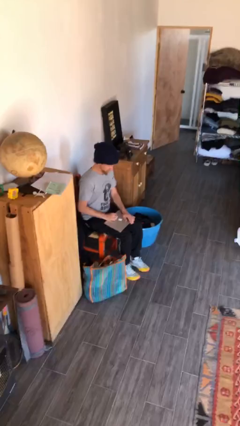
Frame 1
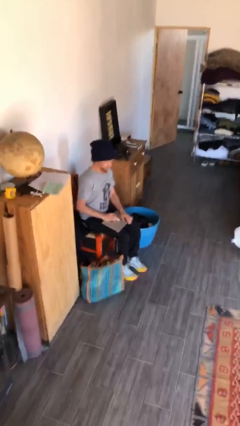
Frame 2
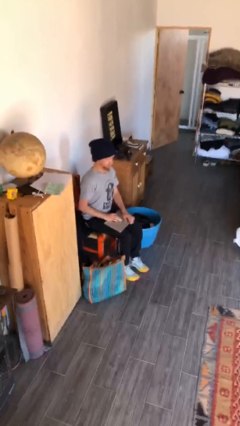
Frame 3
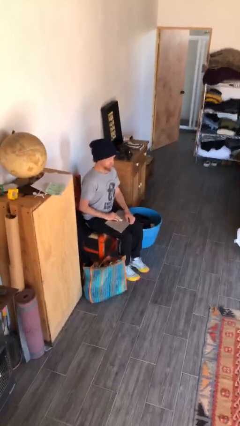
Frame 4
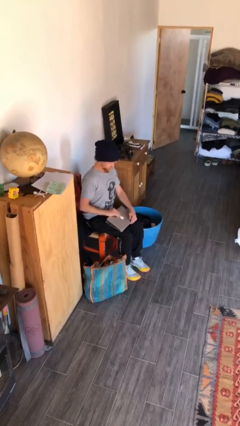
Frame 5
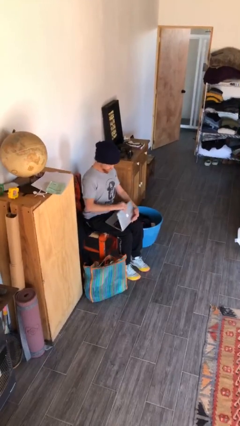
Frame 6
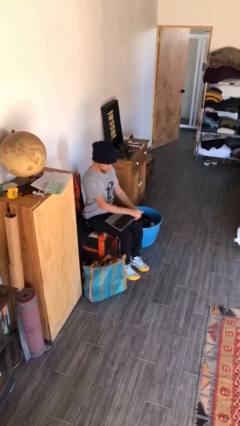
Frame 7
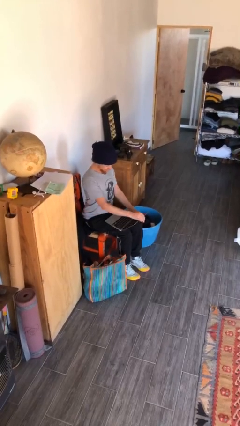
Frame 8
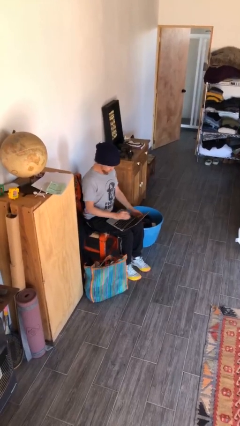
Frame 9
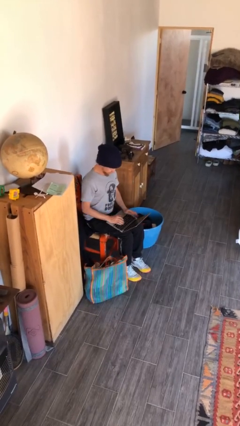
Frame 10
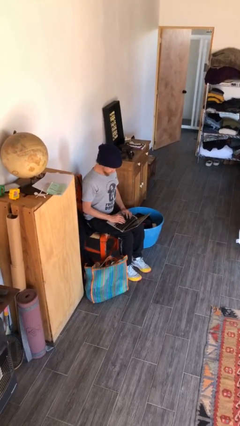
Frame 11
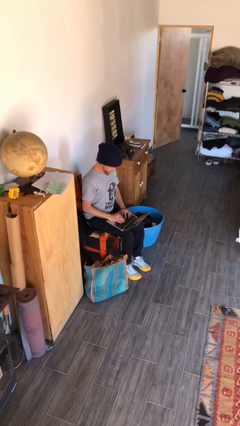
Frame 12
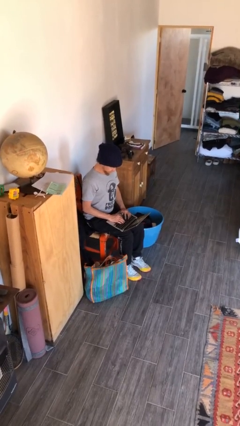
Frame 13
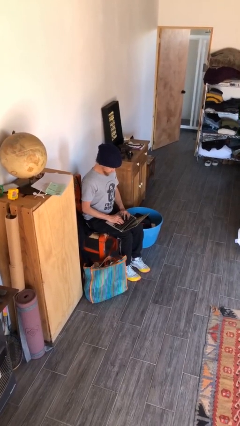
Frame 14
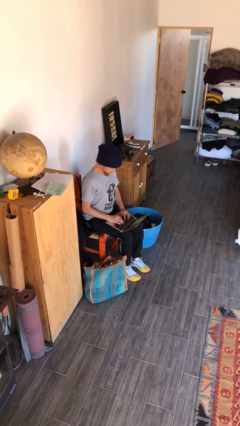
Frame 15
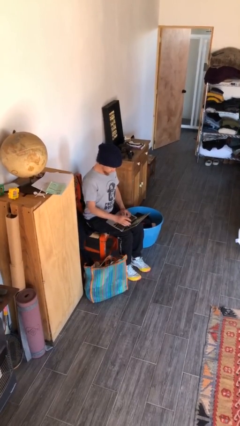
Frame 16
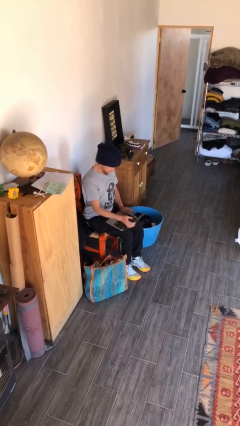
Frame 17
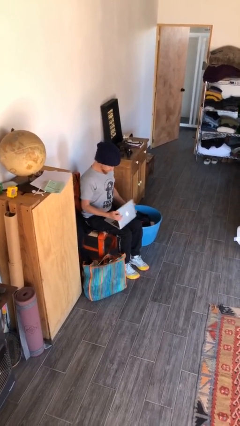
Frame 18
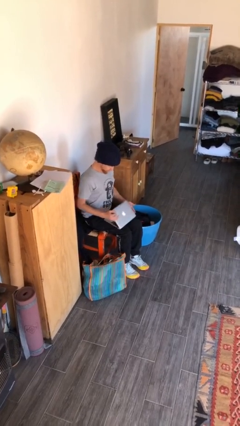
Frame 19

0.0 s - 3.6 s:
person interacts with laptop

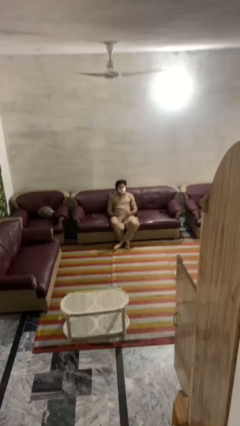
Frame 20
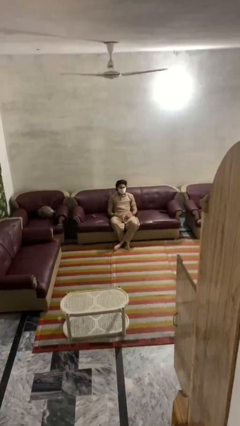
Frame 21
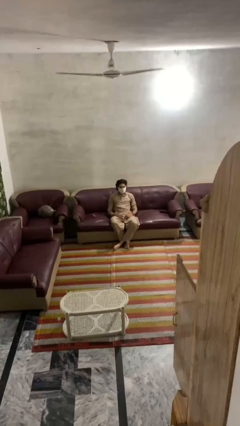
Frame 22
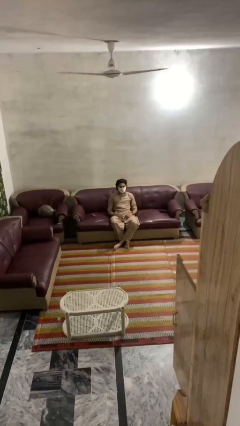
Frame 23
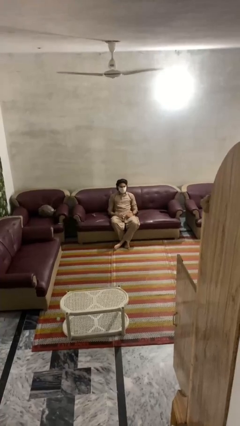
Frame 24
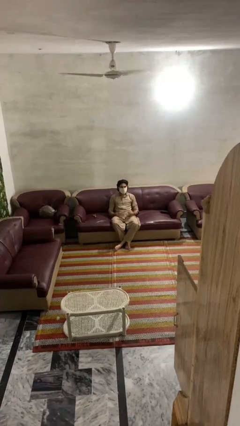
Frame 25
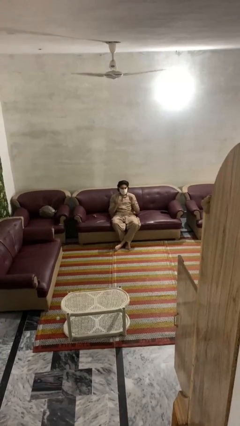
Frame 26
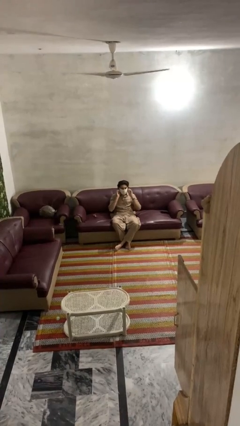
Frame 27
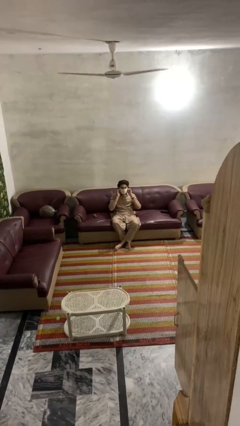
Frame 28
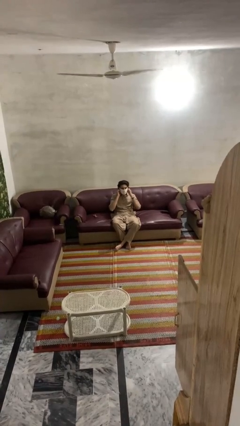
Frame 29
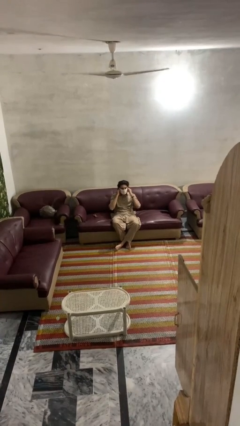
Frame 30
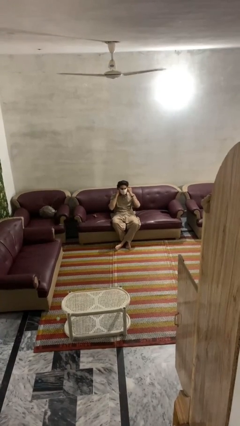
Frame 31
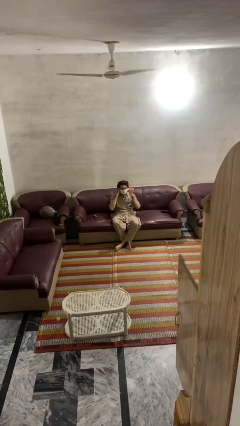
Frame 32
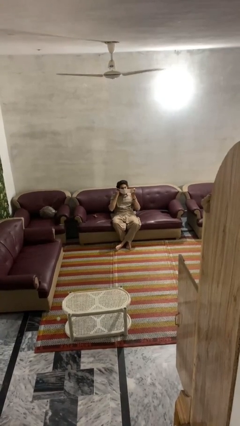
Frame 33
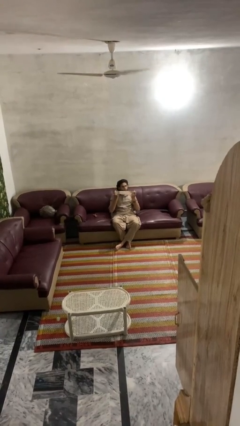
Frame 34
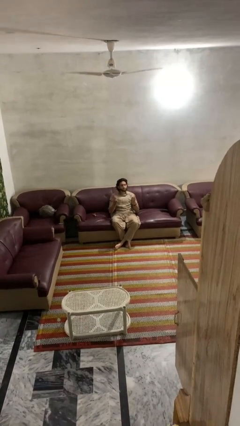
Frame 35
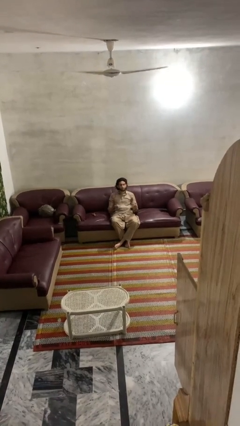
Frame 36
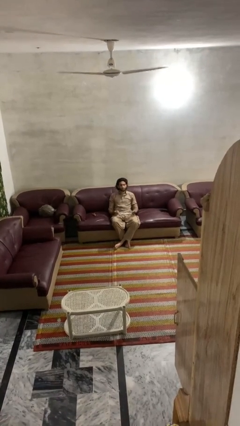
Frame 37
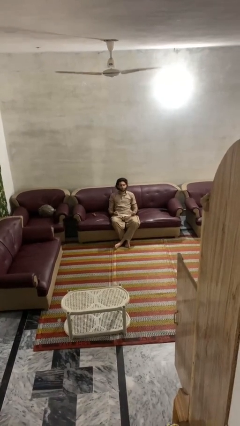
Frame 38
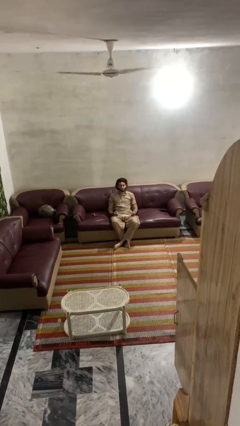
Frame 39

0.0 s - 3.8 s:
person takes off facemask

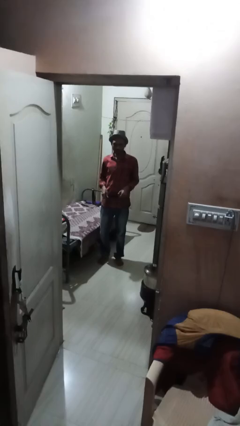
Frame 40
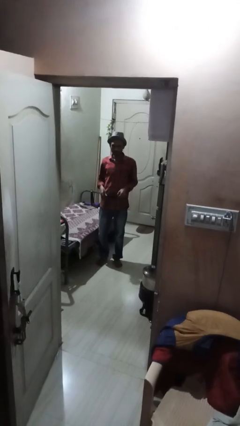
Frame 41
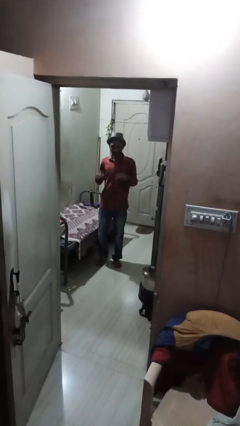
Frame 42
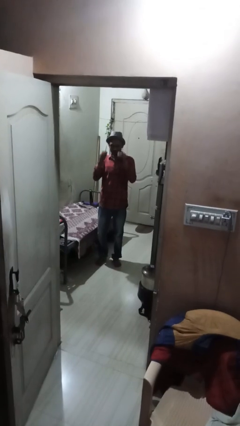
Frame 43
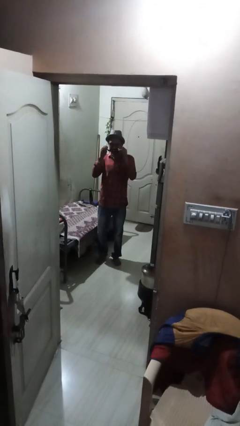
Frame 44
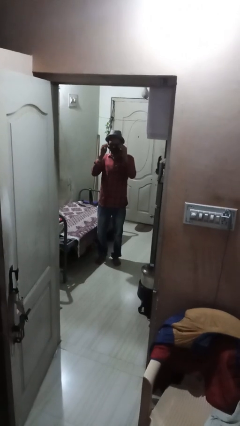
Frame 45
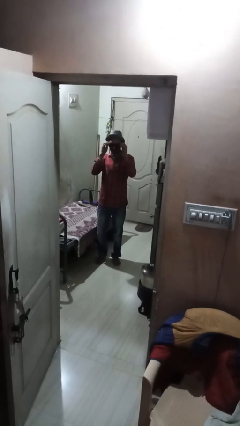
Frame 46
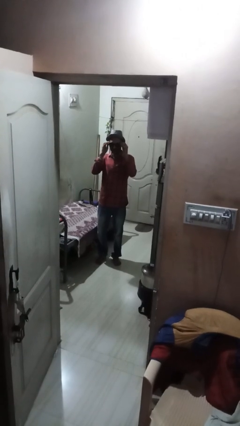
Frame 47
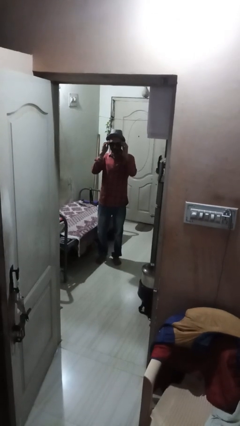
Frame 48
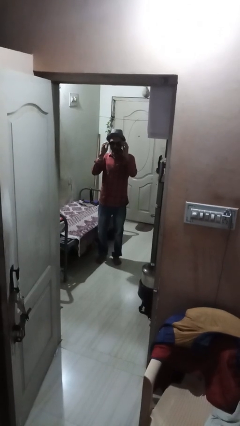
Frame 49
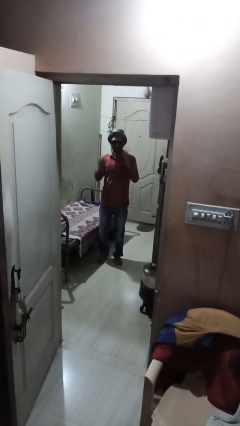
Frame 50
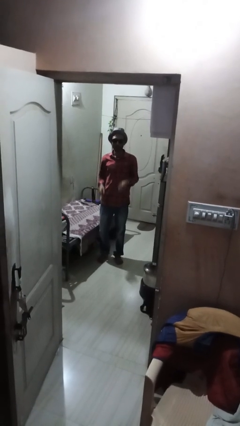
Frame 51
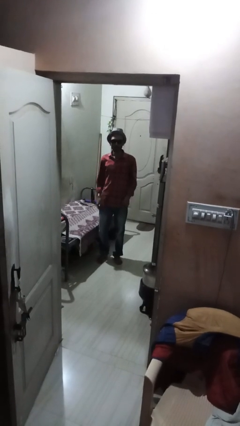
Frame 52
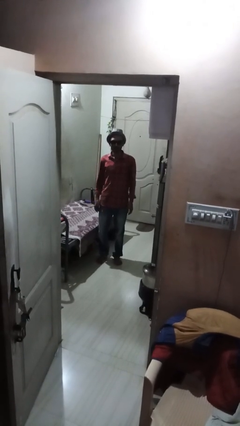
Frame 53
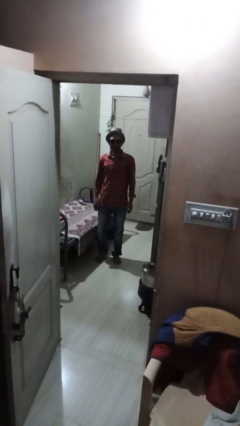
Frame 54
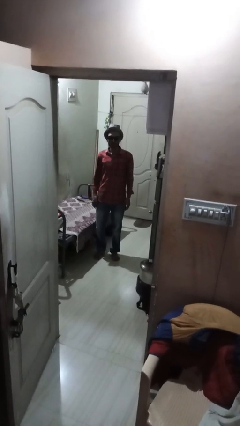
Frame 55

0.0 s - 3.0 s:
person puts on sunglasses

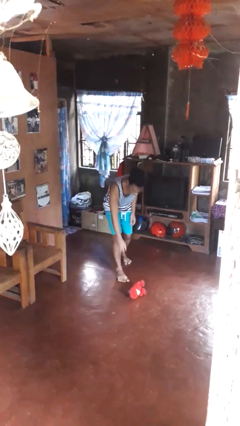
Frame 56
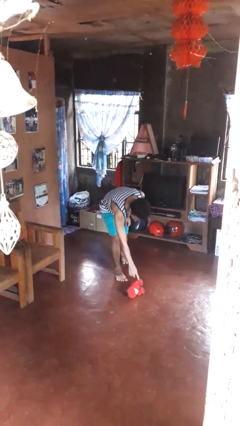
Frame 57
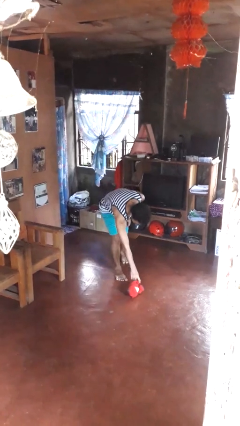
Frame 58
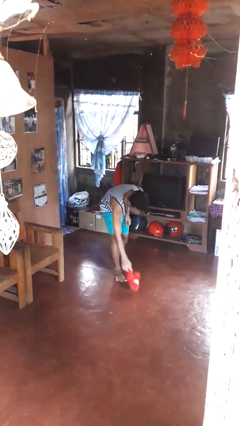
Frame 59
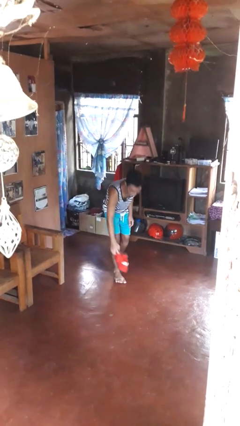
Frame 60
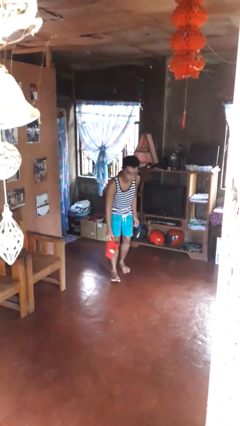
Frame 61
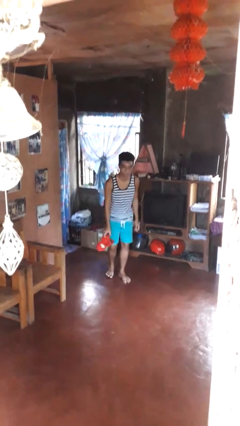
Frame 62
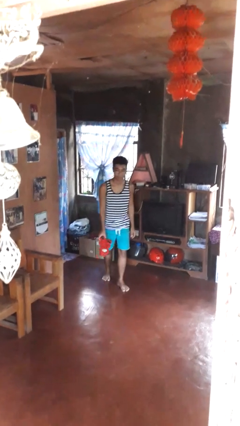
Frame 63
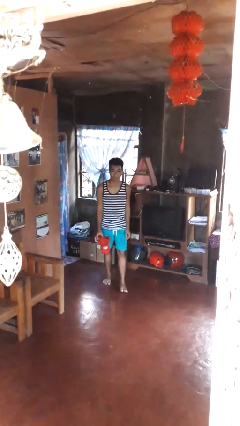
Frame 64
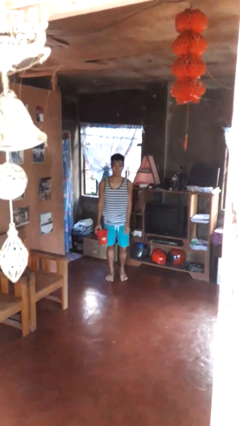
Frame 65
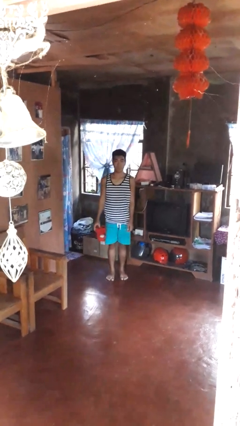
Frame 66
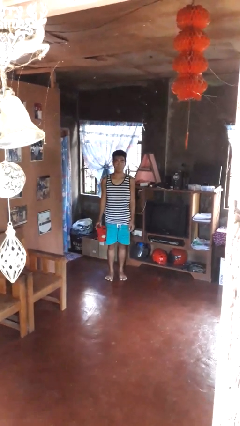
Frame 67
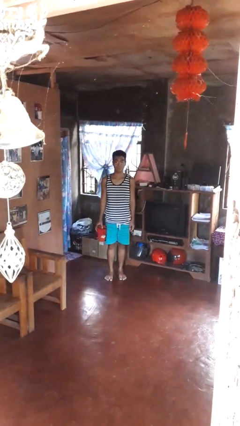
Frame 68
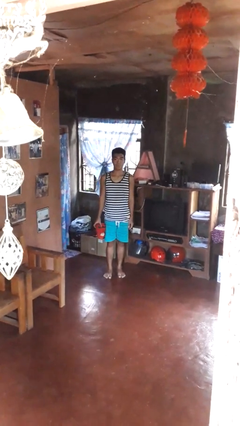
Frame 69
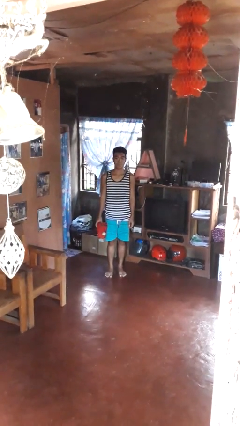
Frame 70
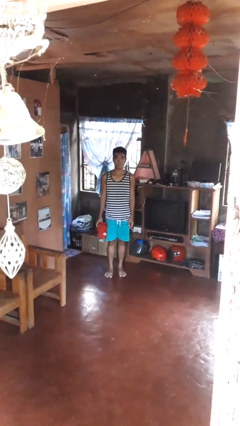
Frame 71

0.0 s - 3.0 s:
person picks up object from floor

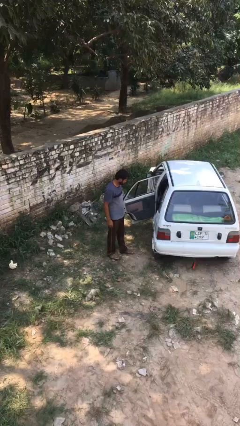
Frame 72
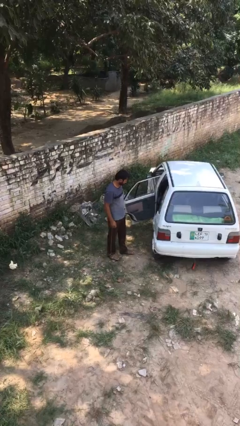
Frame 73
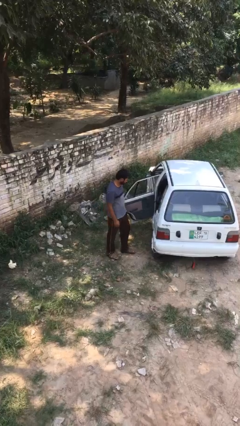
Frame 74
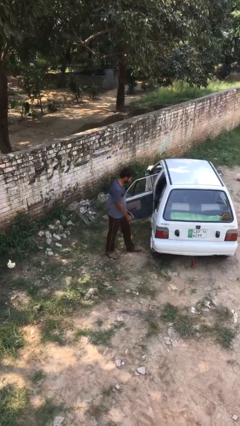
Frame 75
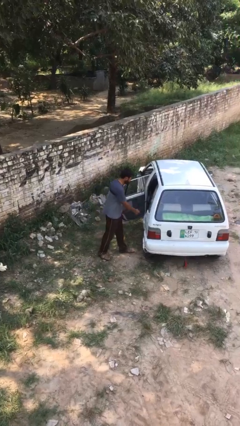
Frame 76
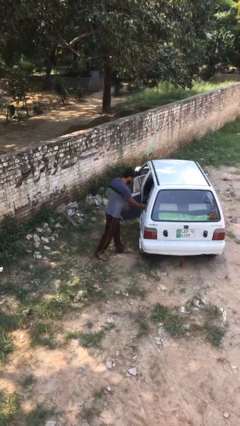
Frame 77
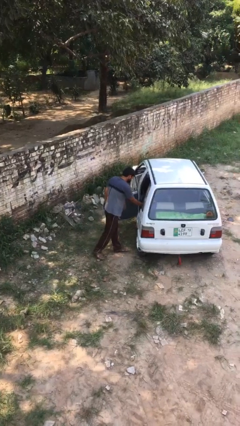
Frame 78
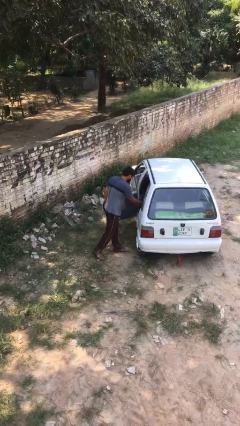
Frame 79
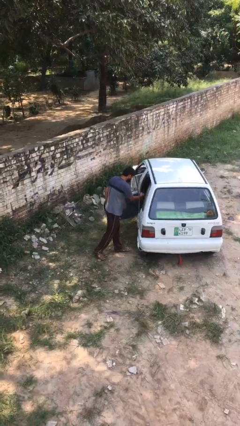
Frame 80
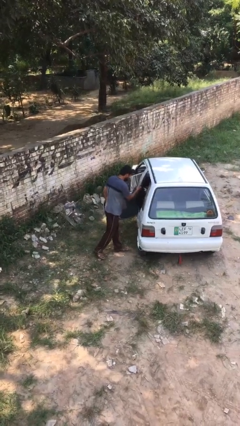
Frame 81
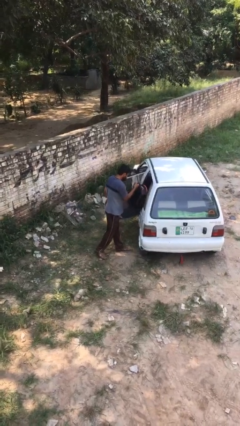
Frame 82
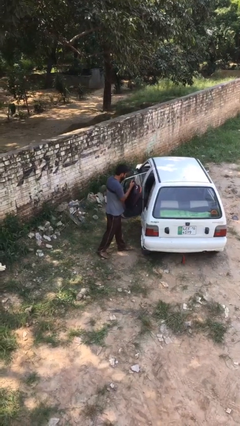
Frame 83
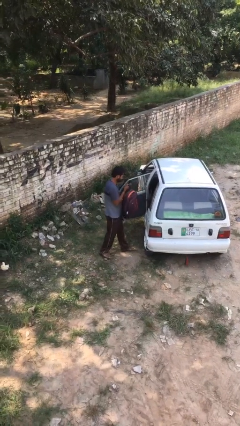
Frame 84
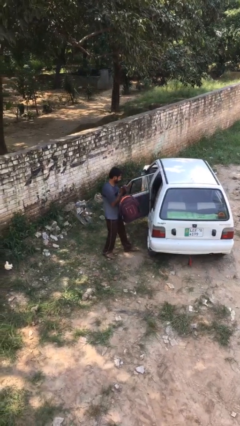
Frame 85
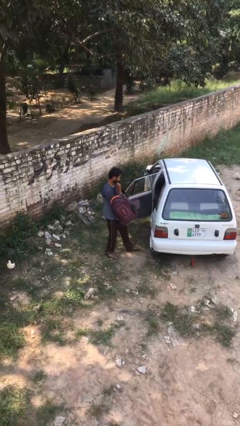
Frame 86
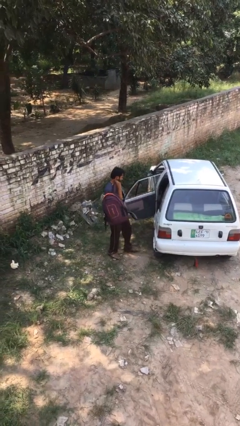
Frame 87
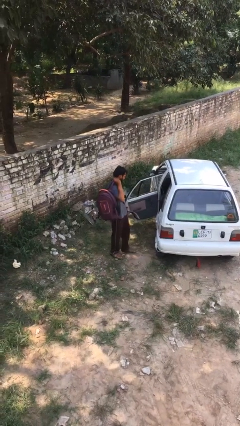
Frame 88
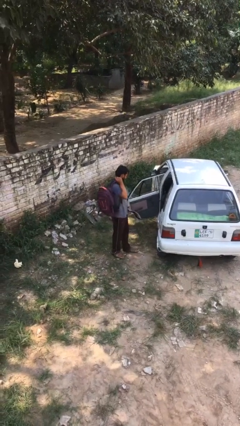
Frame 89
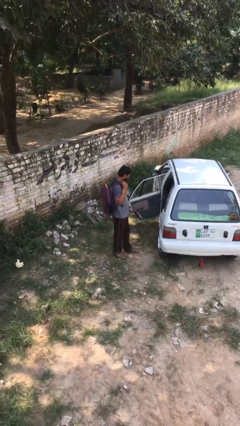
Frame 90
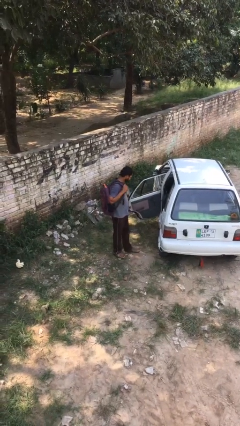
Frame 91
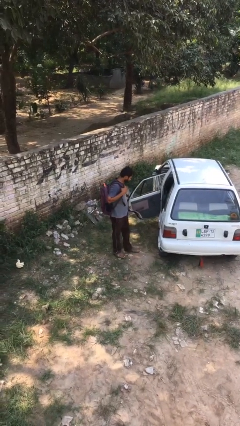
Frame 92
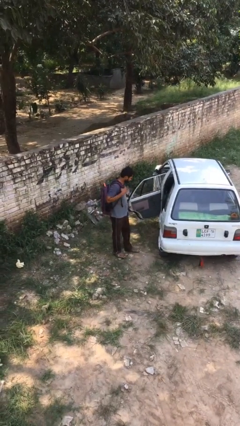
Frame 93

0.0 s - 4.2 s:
person unloads car
